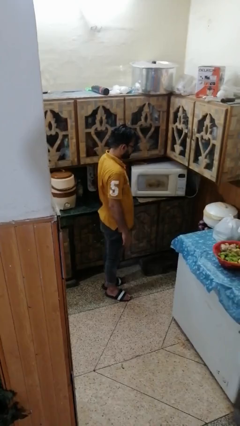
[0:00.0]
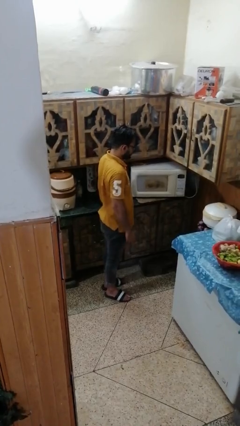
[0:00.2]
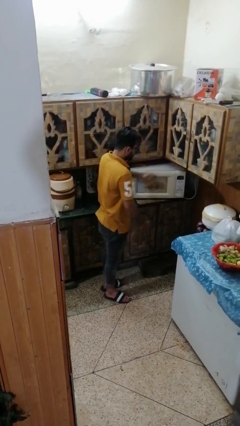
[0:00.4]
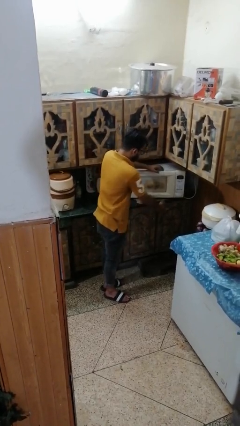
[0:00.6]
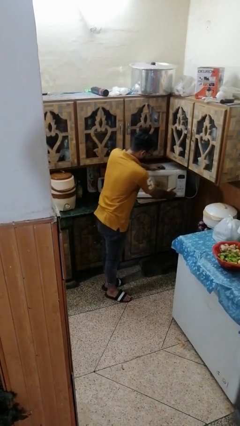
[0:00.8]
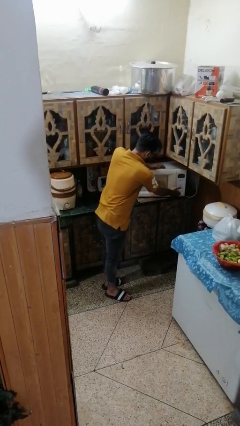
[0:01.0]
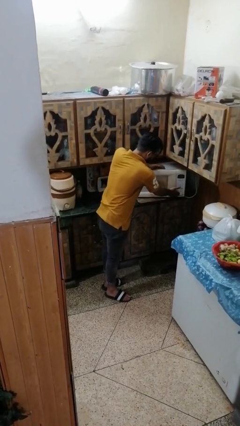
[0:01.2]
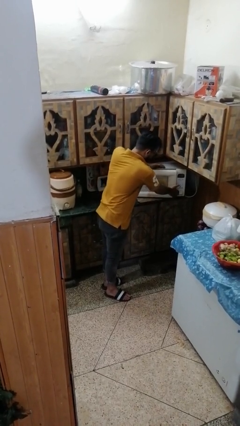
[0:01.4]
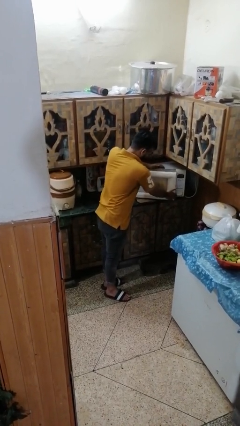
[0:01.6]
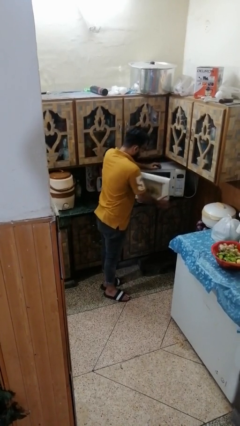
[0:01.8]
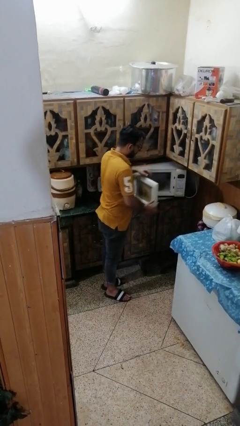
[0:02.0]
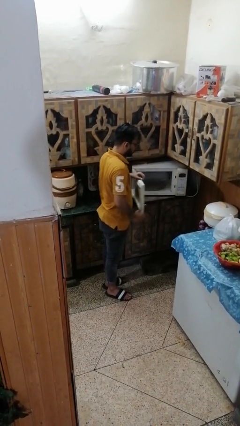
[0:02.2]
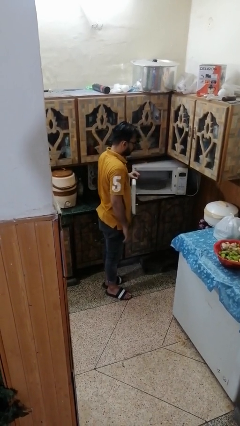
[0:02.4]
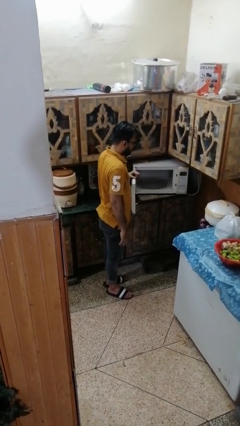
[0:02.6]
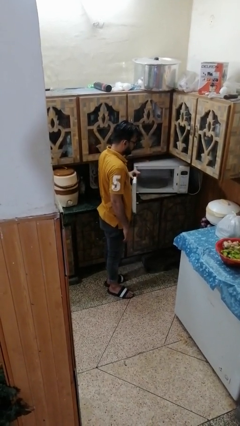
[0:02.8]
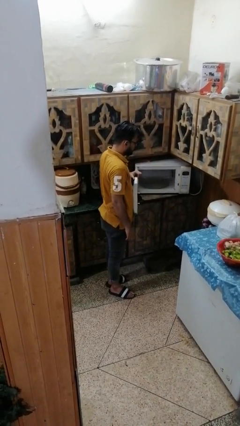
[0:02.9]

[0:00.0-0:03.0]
person opens microwave

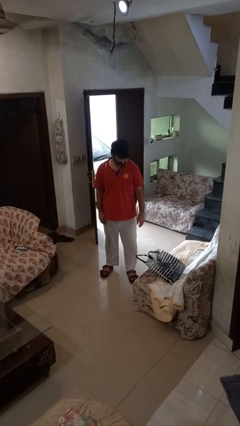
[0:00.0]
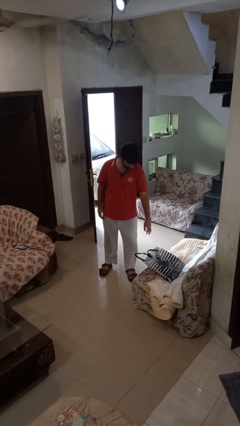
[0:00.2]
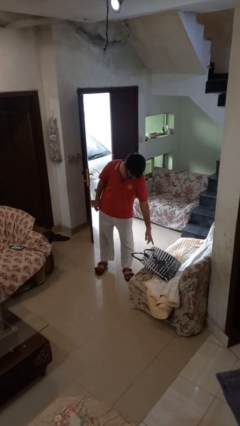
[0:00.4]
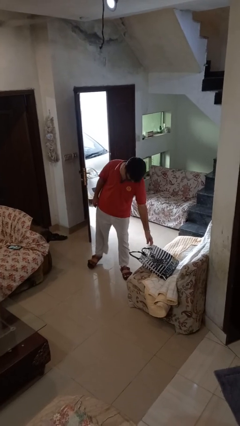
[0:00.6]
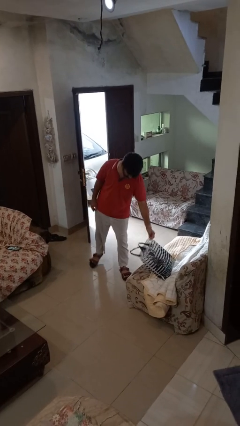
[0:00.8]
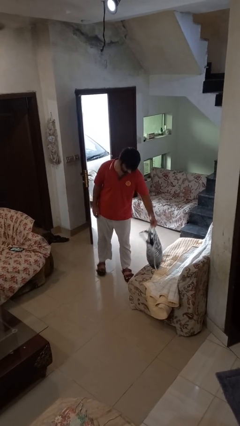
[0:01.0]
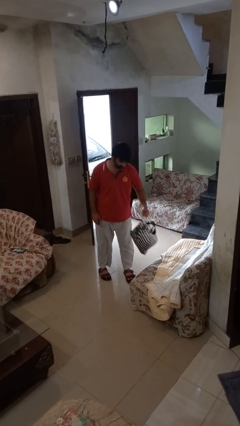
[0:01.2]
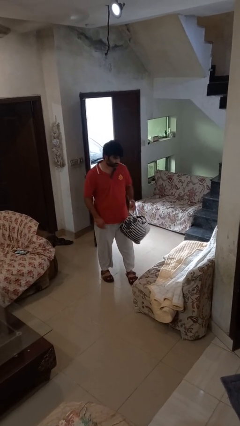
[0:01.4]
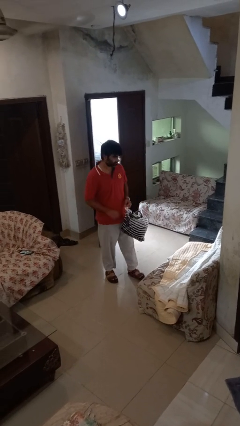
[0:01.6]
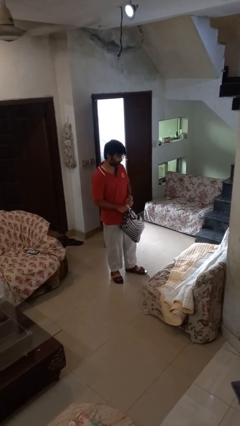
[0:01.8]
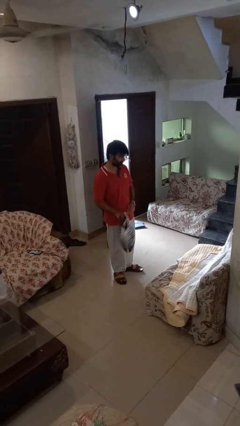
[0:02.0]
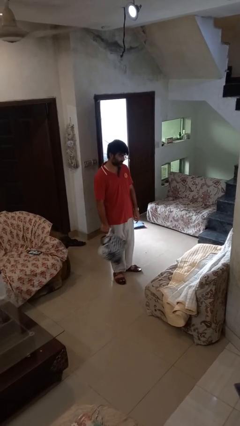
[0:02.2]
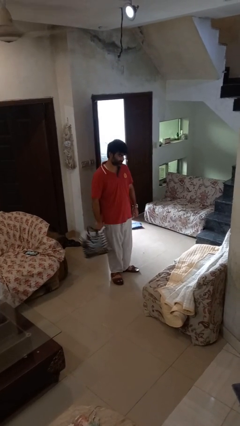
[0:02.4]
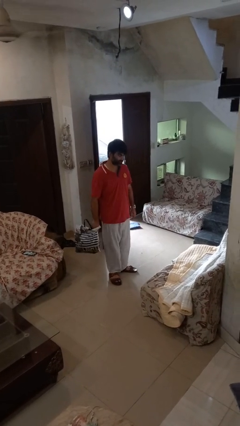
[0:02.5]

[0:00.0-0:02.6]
person picks up object from couch

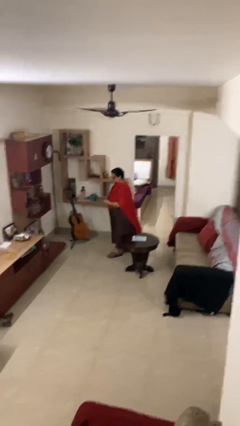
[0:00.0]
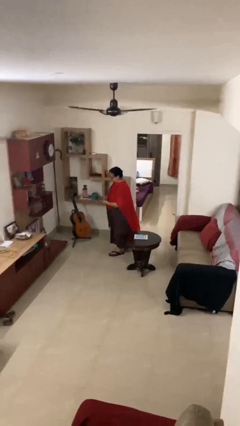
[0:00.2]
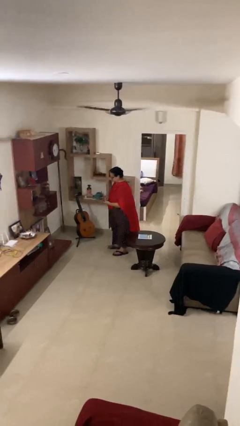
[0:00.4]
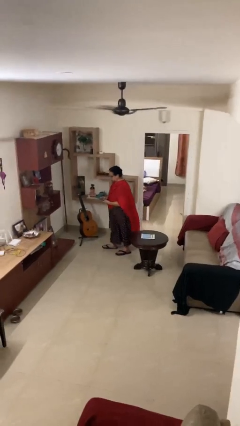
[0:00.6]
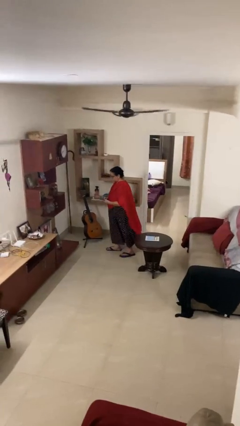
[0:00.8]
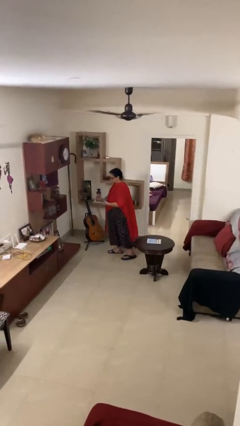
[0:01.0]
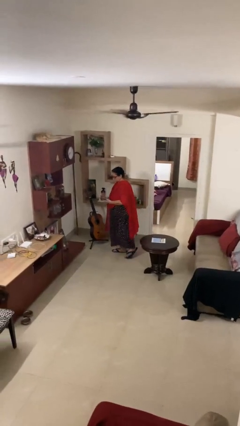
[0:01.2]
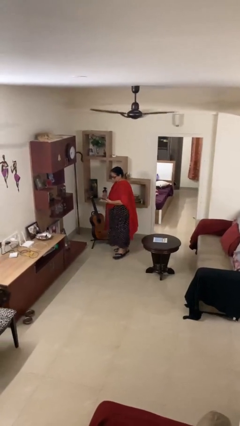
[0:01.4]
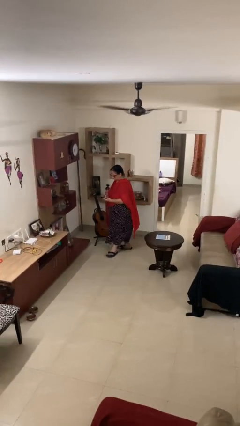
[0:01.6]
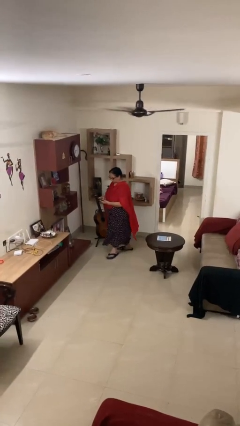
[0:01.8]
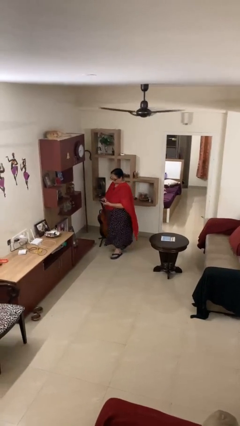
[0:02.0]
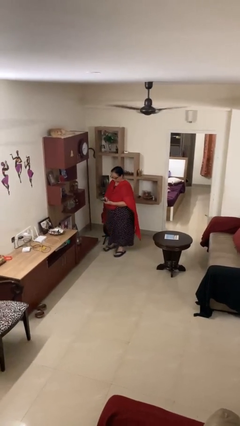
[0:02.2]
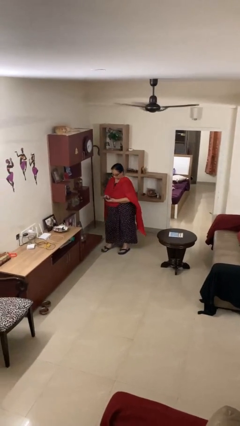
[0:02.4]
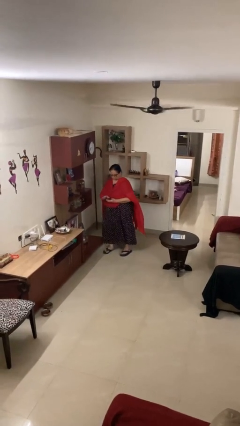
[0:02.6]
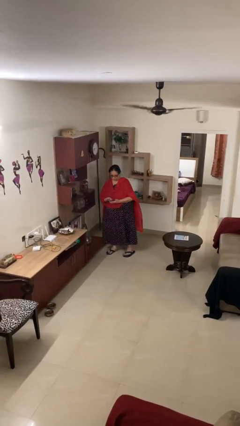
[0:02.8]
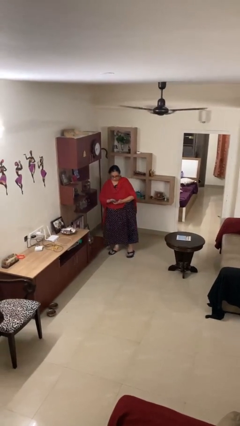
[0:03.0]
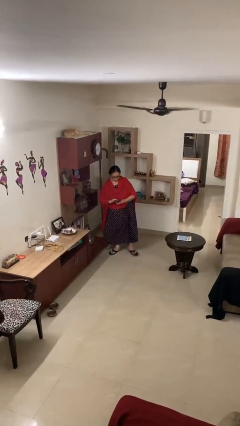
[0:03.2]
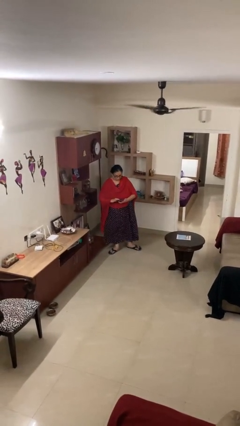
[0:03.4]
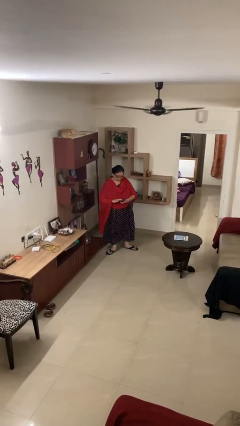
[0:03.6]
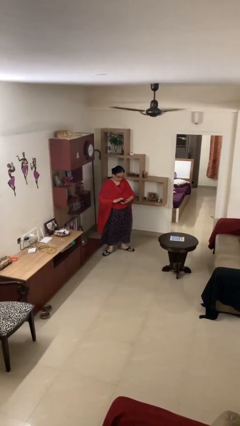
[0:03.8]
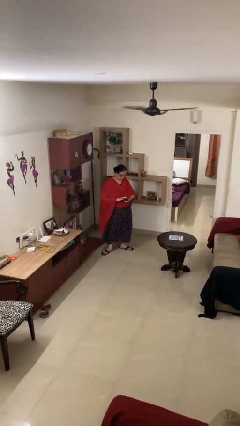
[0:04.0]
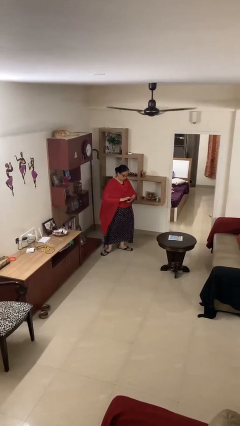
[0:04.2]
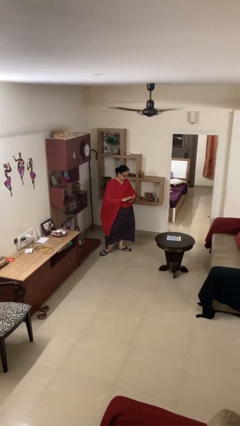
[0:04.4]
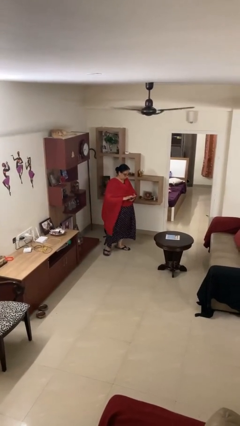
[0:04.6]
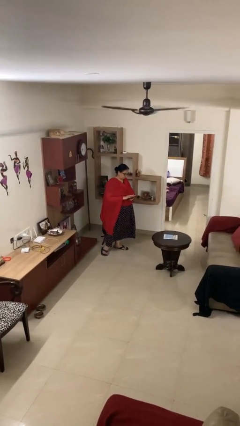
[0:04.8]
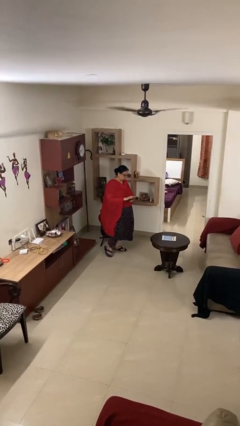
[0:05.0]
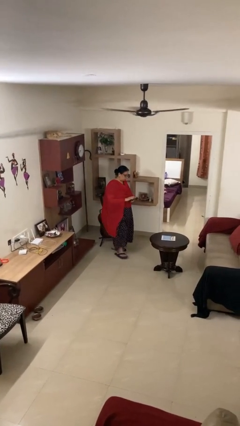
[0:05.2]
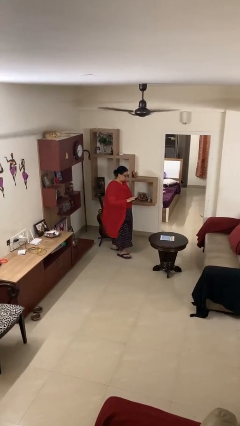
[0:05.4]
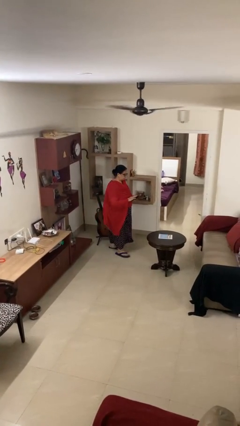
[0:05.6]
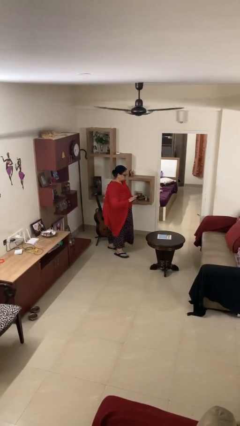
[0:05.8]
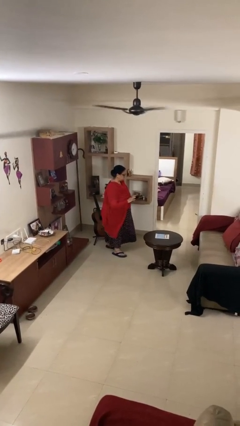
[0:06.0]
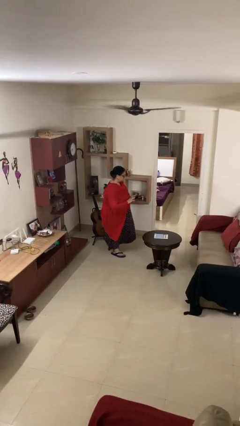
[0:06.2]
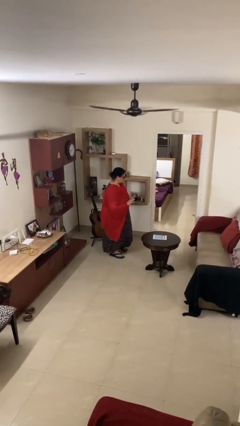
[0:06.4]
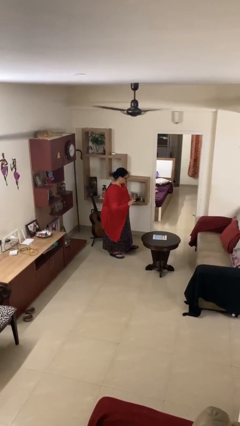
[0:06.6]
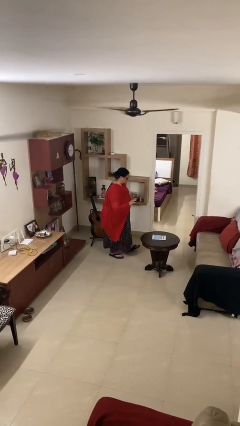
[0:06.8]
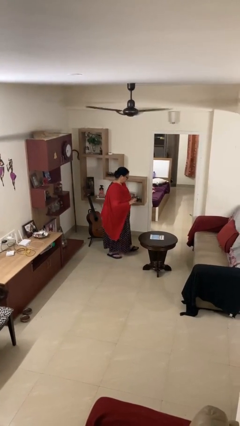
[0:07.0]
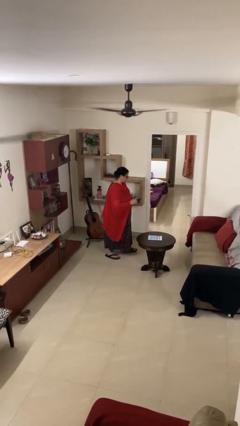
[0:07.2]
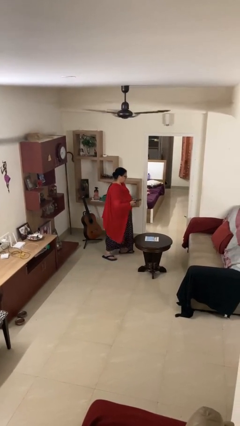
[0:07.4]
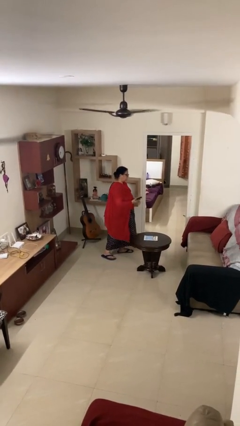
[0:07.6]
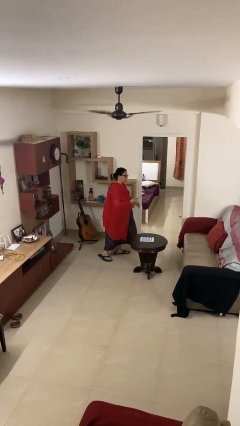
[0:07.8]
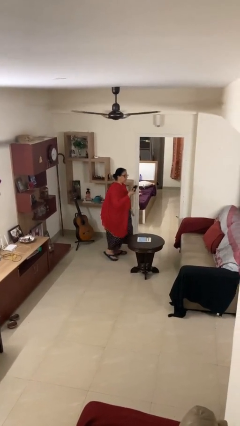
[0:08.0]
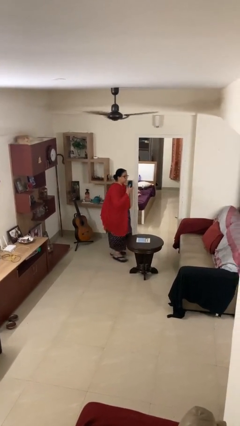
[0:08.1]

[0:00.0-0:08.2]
person texts on phone

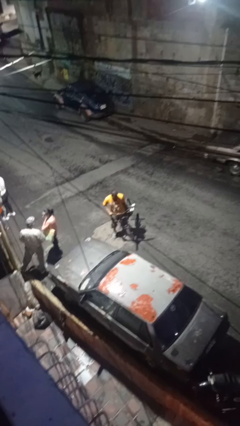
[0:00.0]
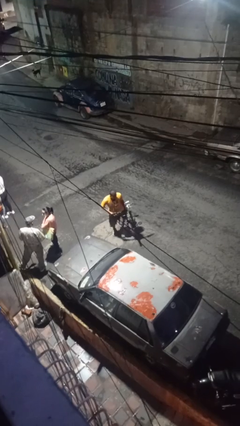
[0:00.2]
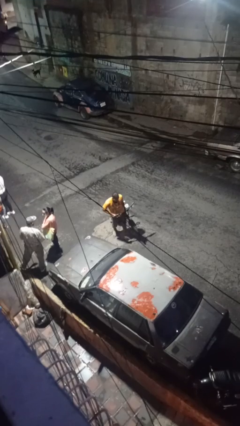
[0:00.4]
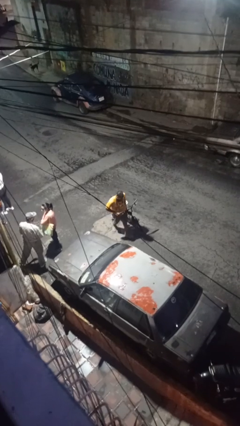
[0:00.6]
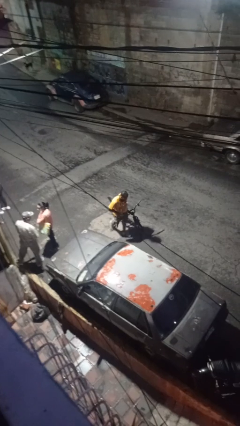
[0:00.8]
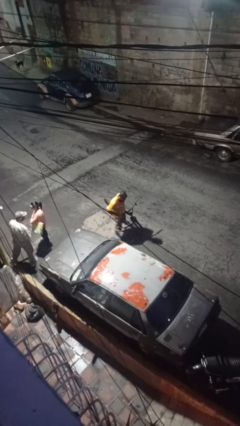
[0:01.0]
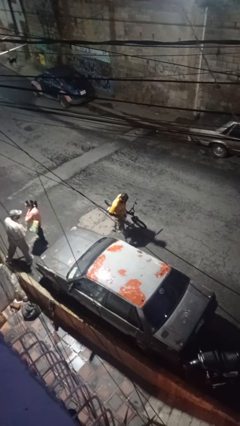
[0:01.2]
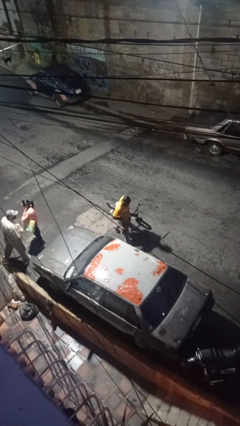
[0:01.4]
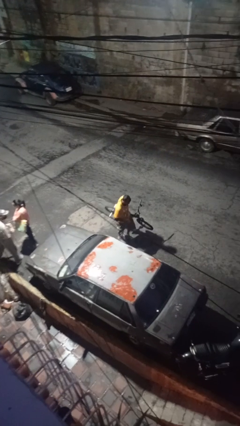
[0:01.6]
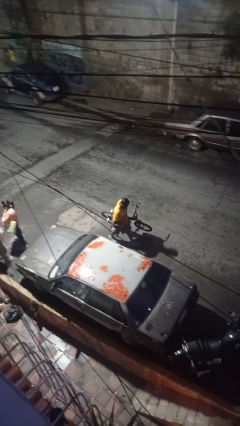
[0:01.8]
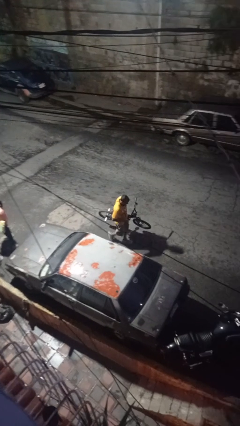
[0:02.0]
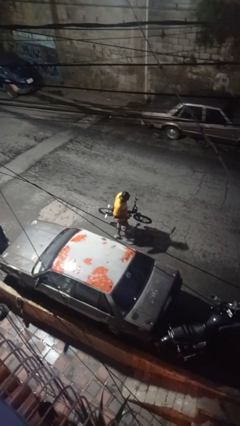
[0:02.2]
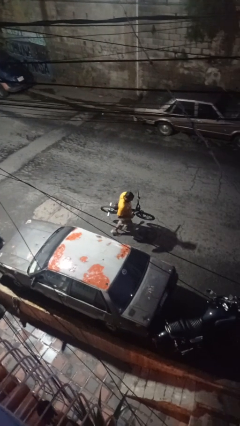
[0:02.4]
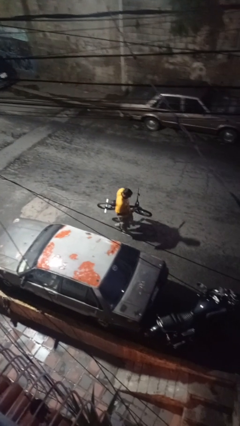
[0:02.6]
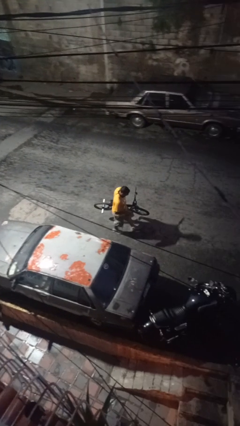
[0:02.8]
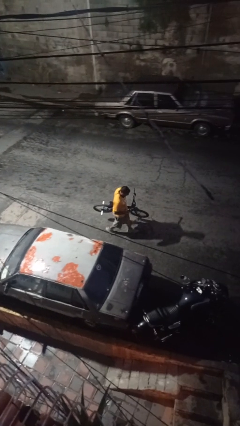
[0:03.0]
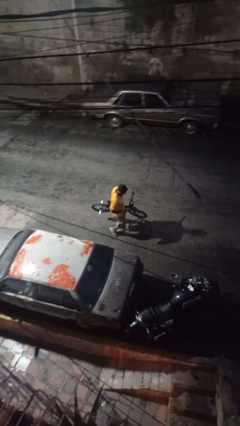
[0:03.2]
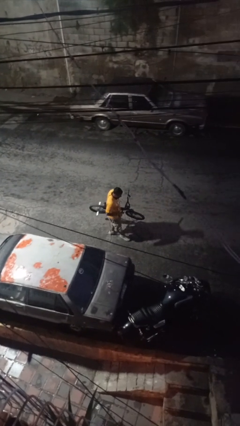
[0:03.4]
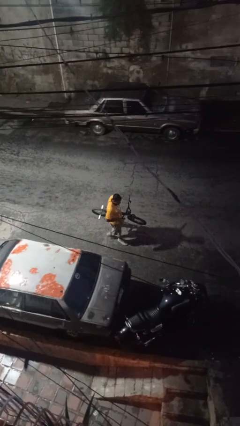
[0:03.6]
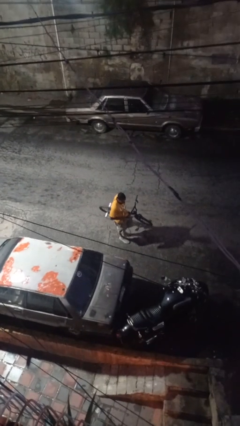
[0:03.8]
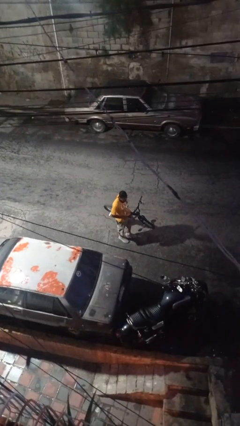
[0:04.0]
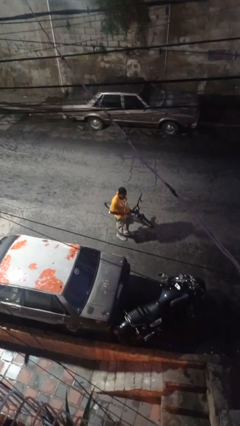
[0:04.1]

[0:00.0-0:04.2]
person carries bicycle
